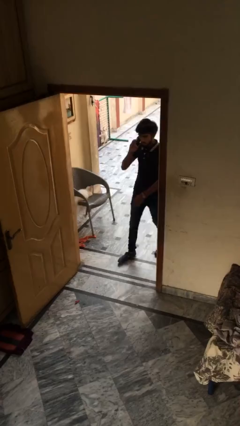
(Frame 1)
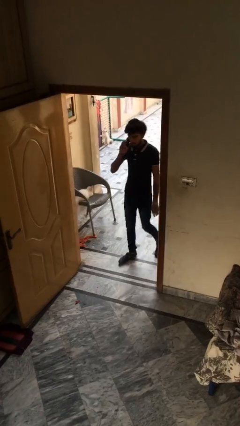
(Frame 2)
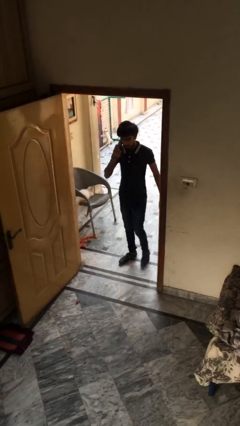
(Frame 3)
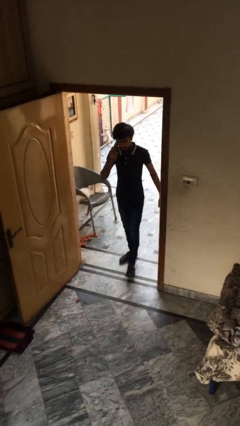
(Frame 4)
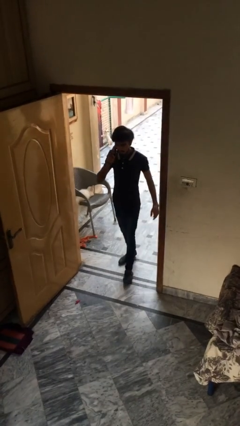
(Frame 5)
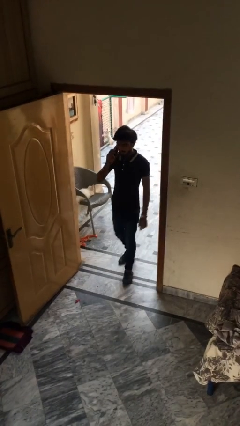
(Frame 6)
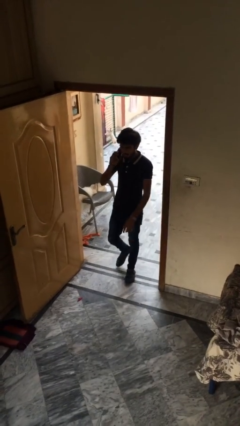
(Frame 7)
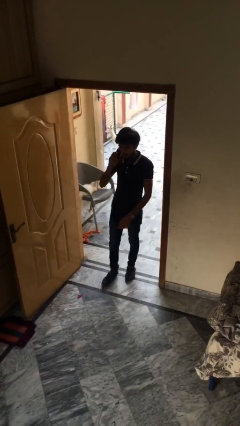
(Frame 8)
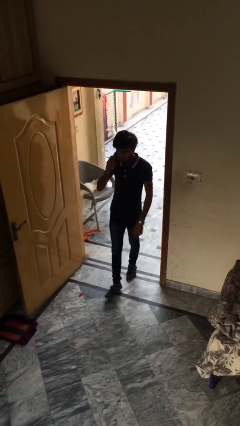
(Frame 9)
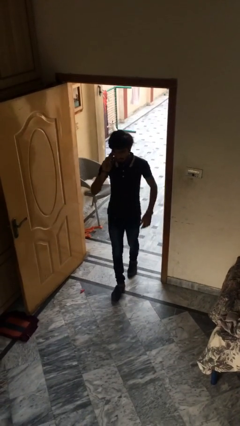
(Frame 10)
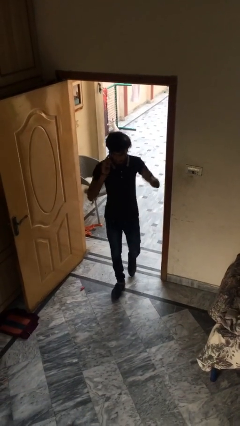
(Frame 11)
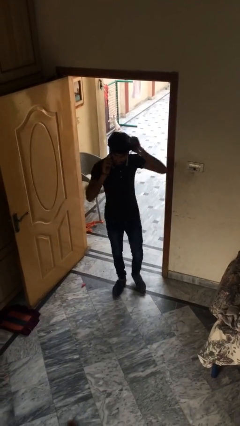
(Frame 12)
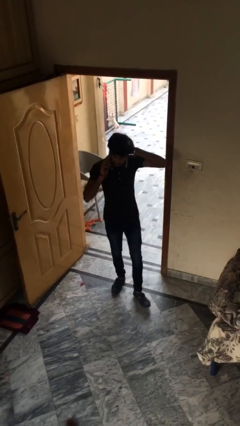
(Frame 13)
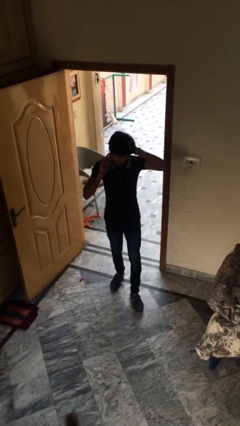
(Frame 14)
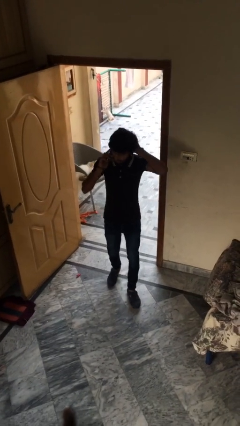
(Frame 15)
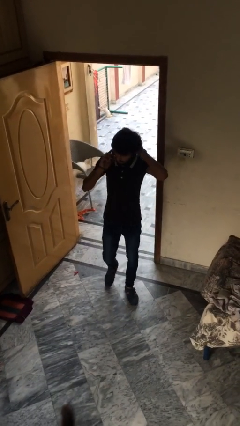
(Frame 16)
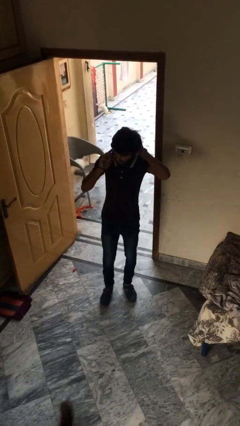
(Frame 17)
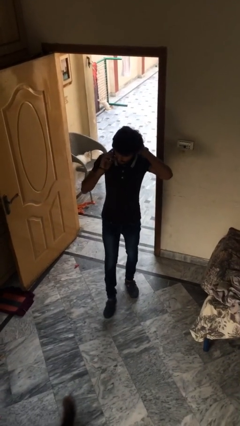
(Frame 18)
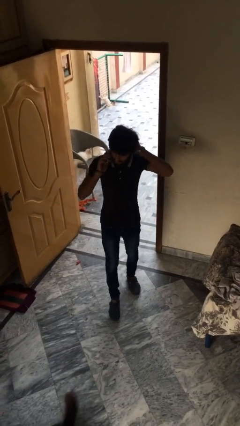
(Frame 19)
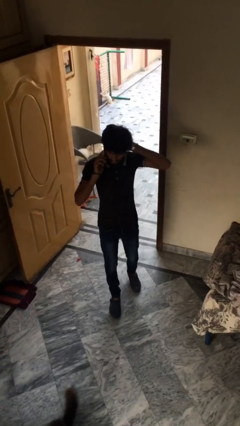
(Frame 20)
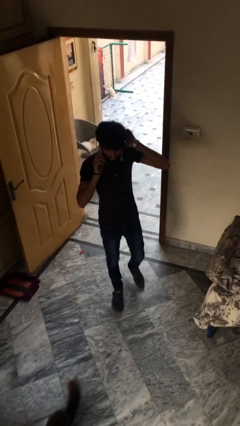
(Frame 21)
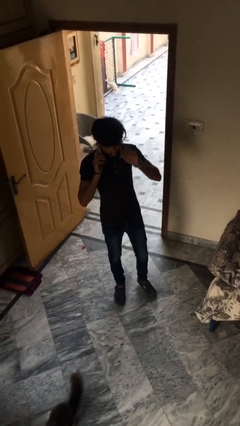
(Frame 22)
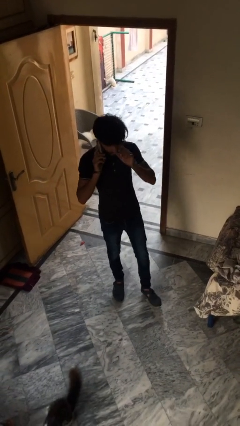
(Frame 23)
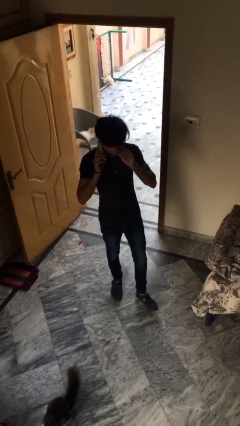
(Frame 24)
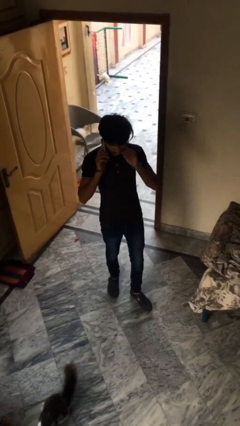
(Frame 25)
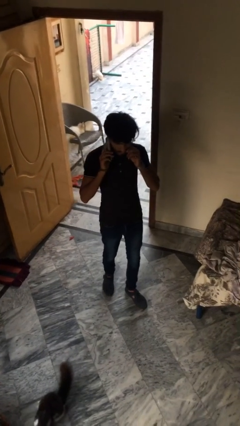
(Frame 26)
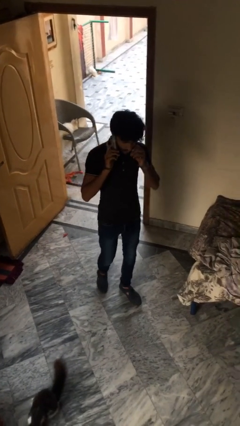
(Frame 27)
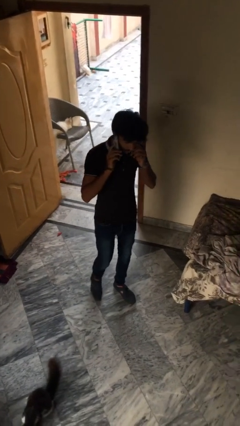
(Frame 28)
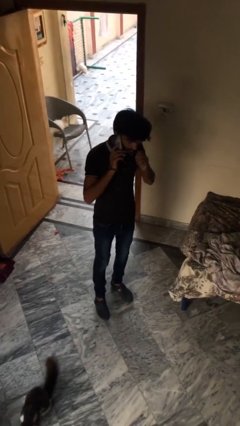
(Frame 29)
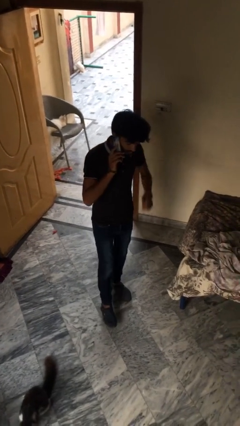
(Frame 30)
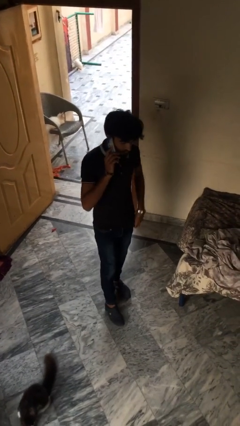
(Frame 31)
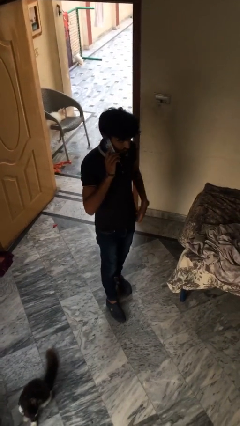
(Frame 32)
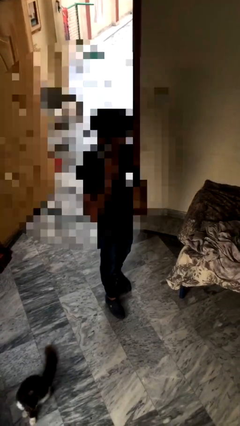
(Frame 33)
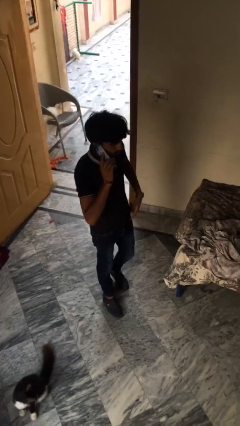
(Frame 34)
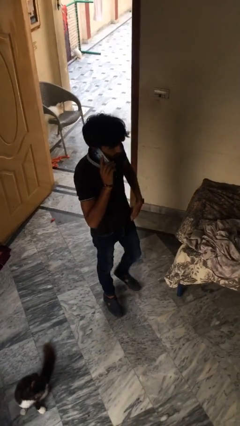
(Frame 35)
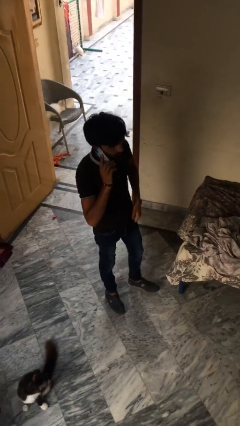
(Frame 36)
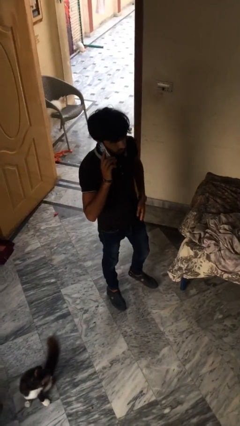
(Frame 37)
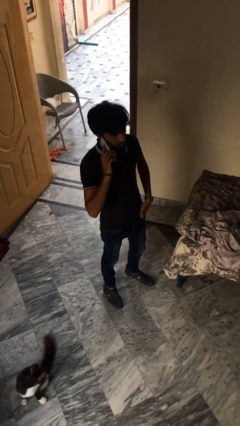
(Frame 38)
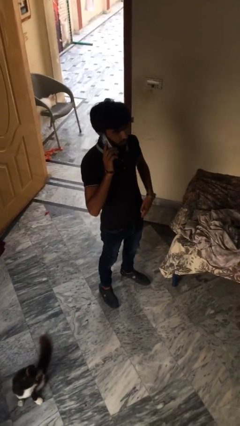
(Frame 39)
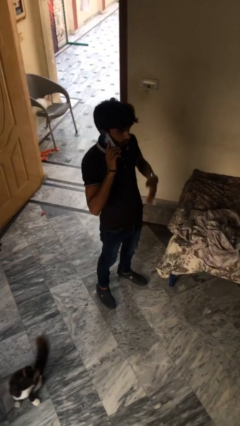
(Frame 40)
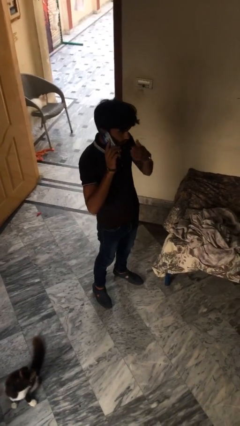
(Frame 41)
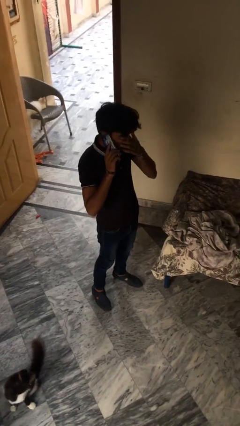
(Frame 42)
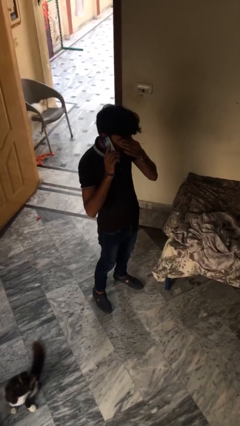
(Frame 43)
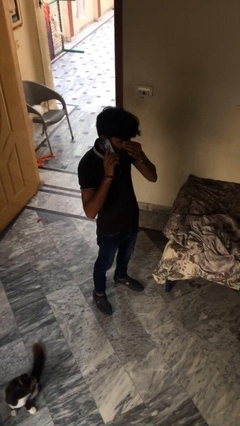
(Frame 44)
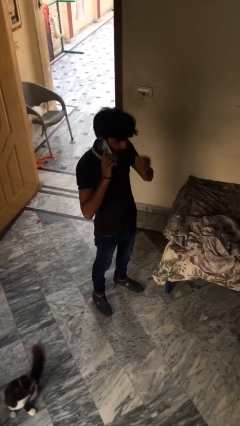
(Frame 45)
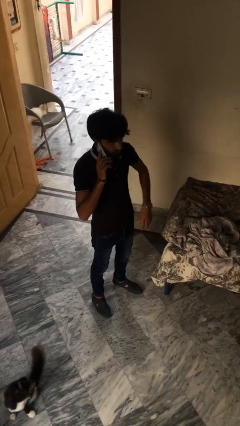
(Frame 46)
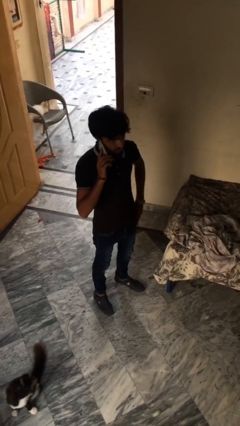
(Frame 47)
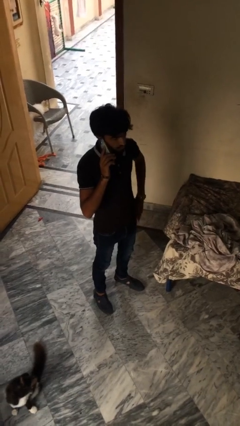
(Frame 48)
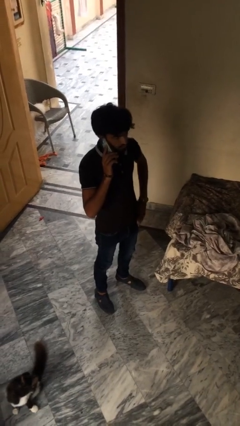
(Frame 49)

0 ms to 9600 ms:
person enters scene through structure

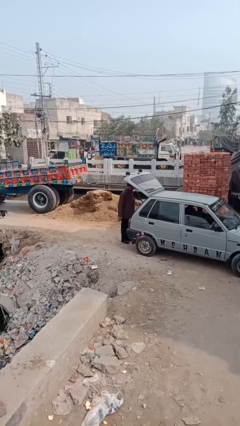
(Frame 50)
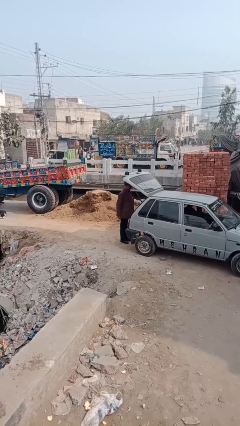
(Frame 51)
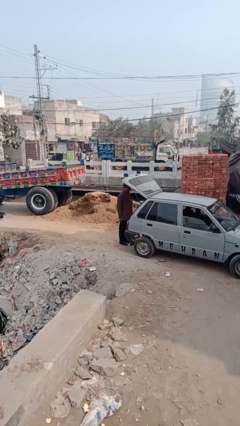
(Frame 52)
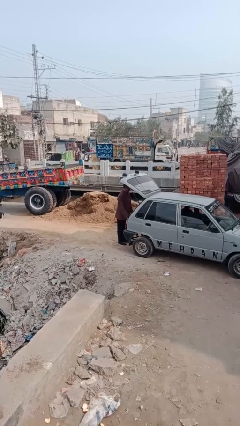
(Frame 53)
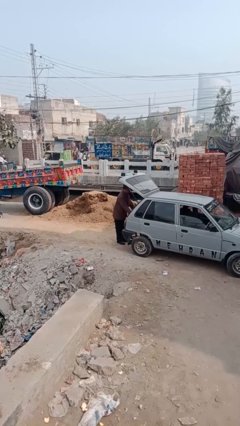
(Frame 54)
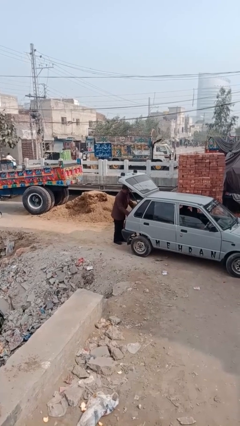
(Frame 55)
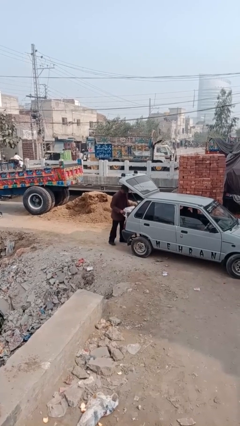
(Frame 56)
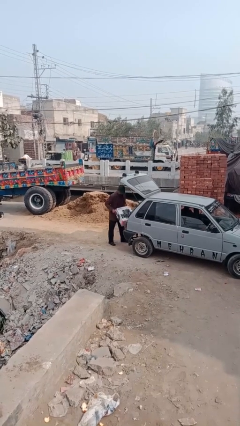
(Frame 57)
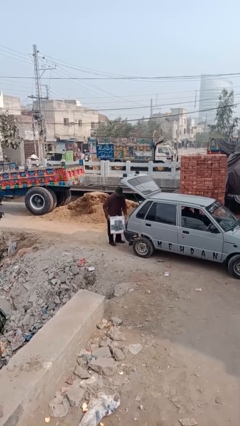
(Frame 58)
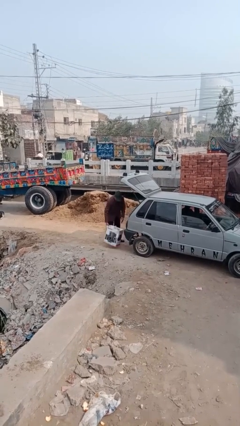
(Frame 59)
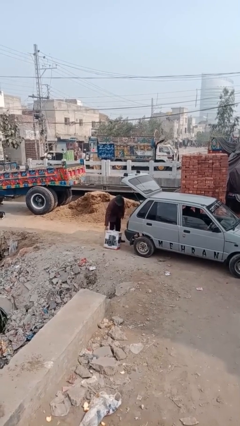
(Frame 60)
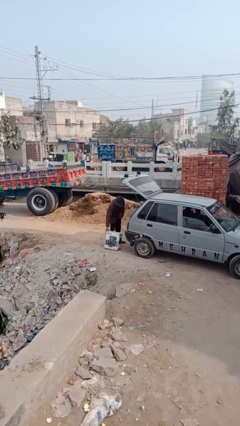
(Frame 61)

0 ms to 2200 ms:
person unloads car

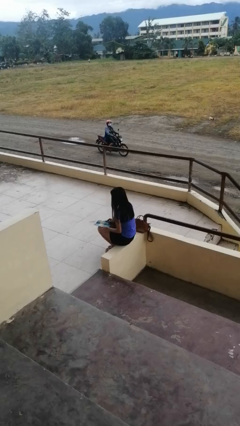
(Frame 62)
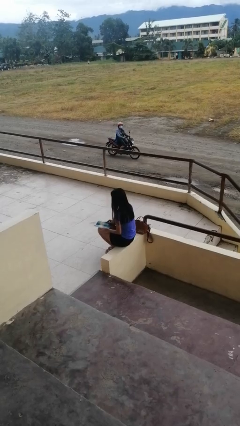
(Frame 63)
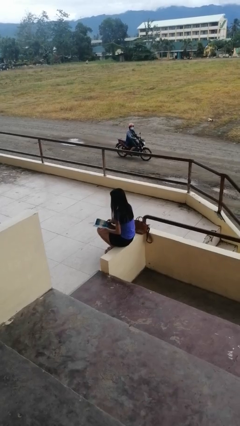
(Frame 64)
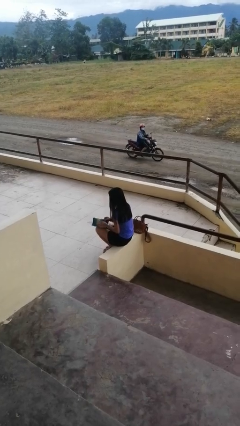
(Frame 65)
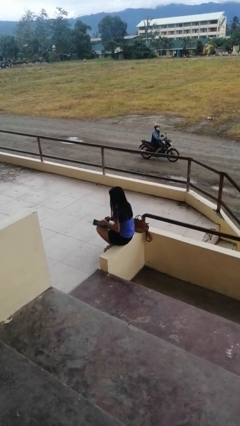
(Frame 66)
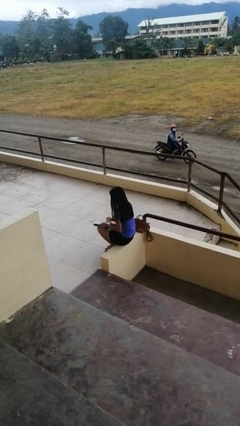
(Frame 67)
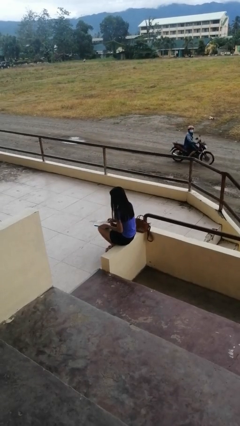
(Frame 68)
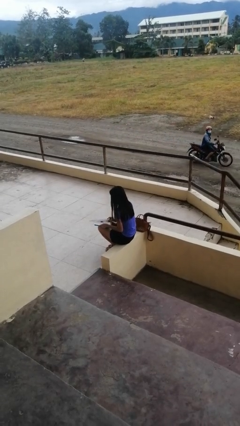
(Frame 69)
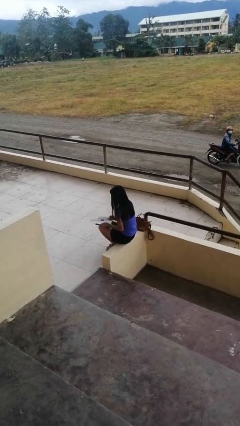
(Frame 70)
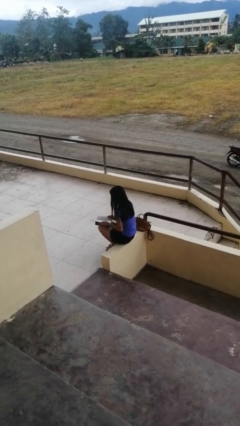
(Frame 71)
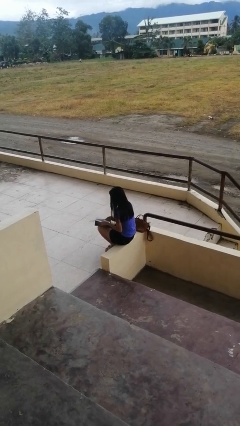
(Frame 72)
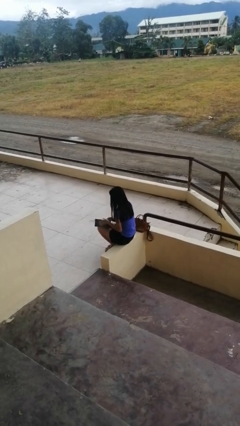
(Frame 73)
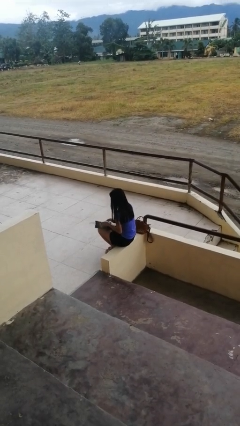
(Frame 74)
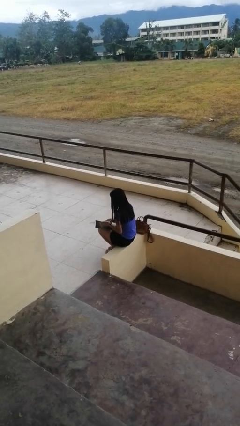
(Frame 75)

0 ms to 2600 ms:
person reads magazine

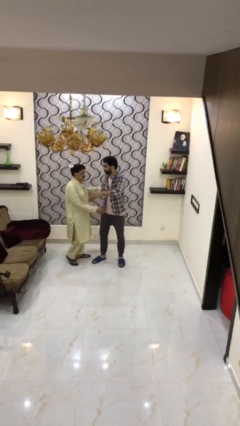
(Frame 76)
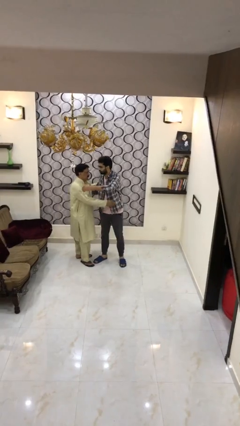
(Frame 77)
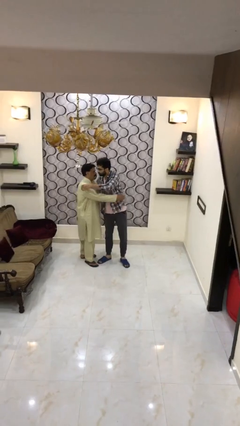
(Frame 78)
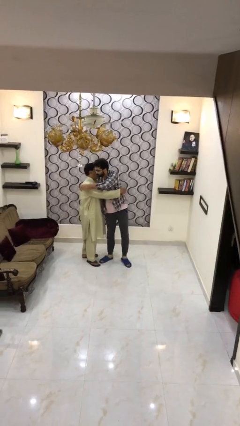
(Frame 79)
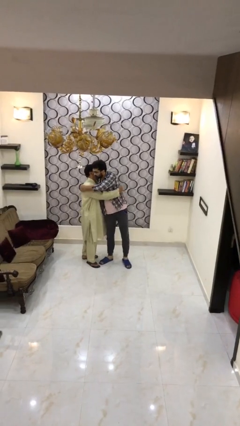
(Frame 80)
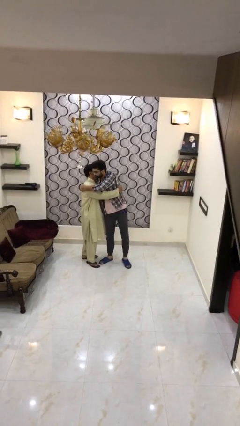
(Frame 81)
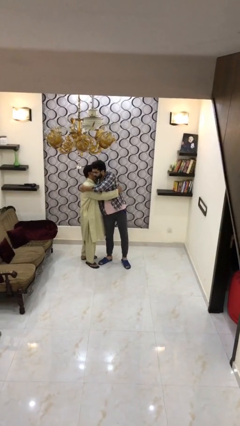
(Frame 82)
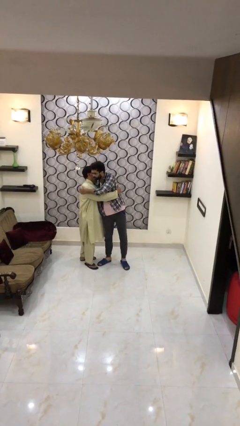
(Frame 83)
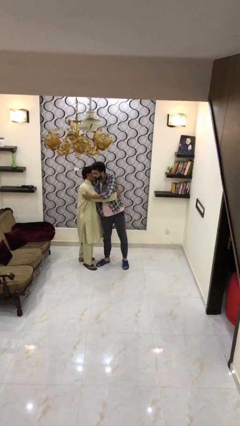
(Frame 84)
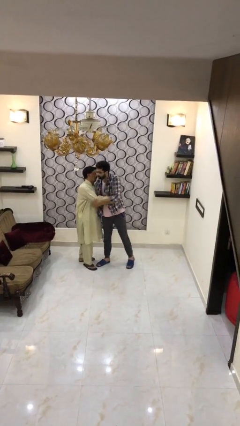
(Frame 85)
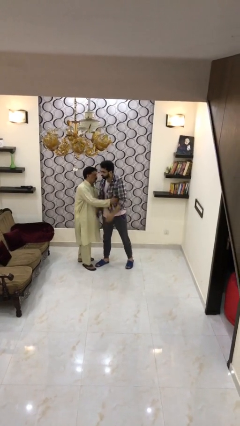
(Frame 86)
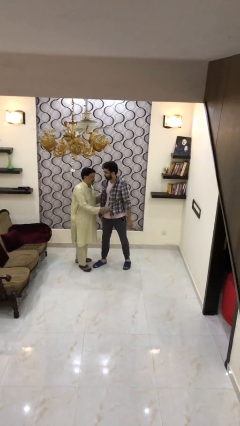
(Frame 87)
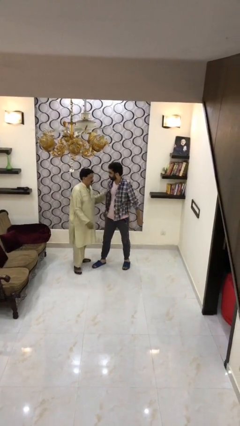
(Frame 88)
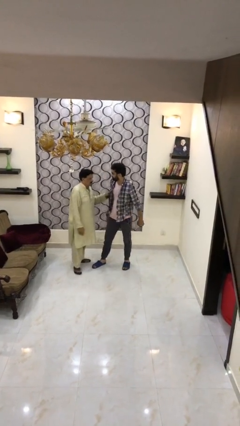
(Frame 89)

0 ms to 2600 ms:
person embraces person

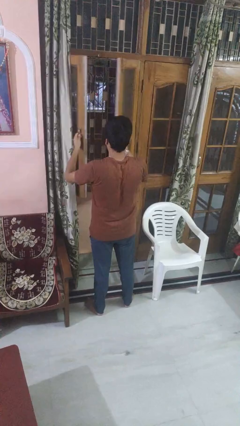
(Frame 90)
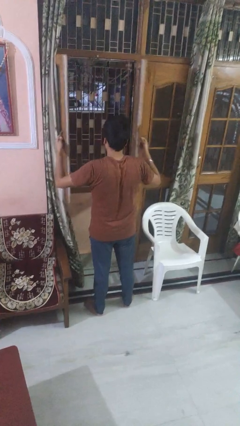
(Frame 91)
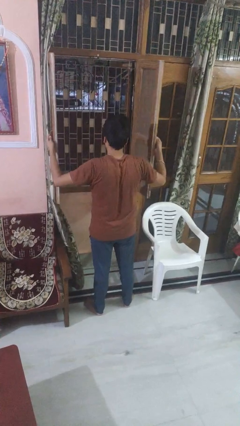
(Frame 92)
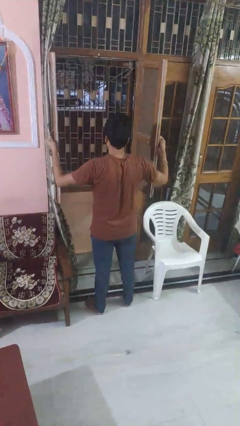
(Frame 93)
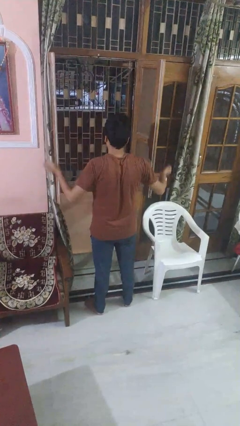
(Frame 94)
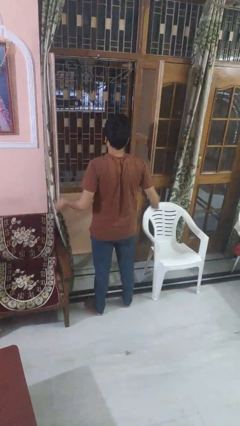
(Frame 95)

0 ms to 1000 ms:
person opens home window
